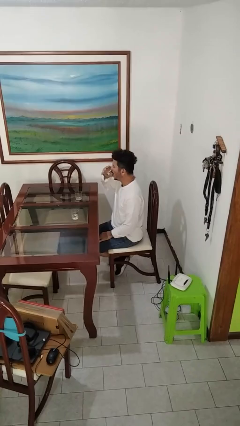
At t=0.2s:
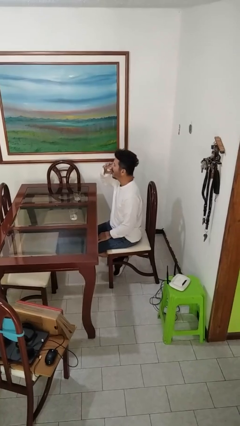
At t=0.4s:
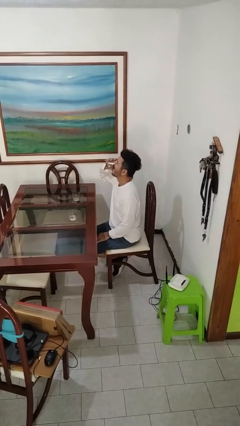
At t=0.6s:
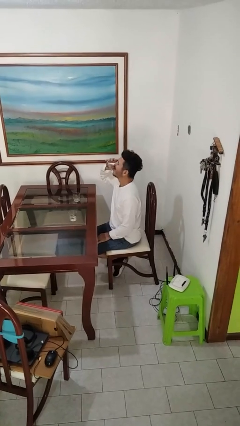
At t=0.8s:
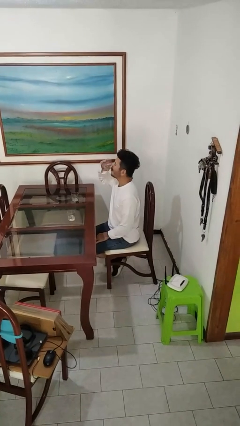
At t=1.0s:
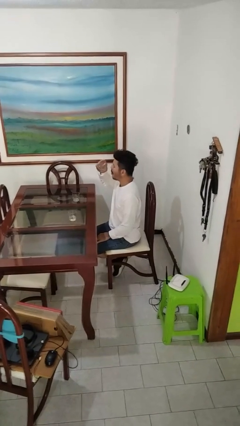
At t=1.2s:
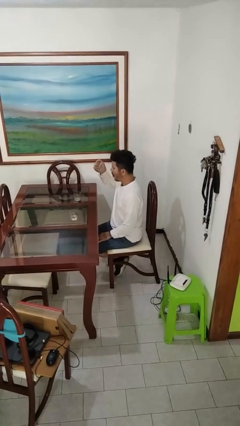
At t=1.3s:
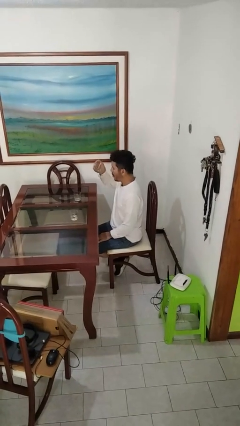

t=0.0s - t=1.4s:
person drinks from shotglass

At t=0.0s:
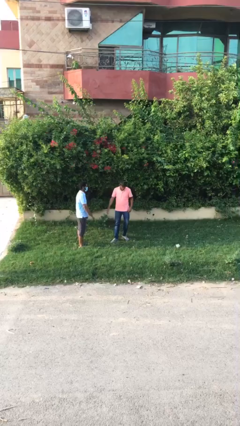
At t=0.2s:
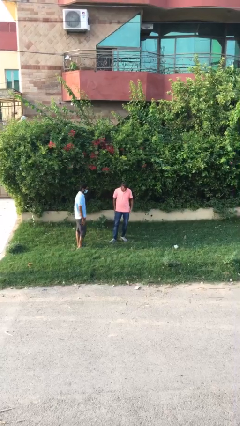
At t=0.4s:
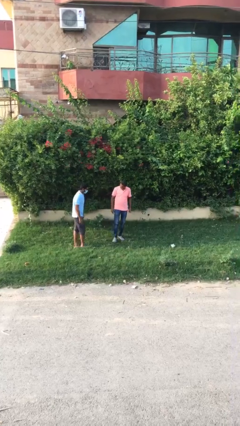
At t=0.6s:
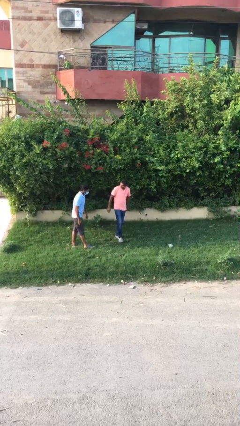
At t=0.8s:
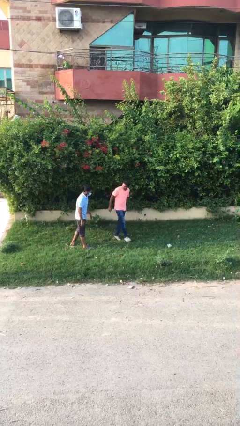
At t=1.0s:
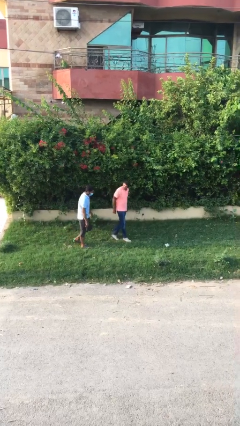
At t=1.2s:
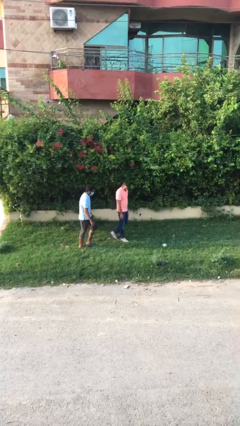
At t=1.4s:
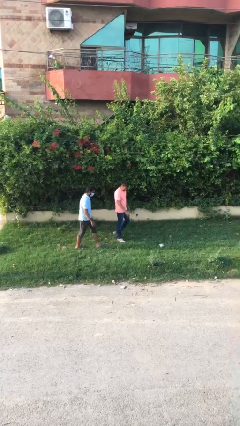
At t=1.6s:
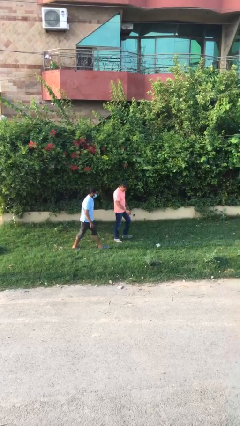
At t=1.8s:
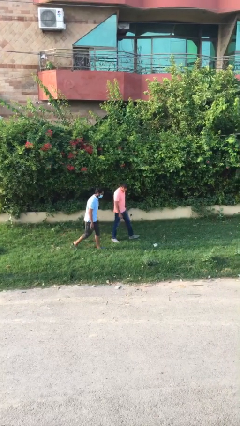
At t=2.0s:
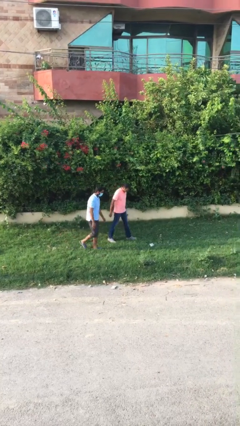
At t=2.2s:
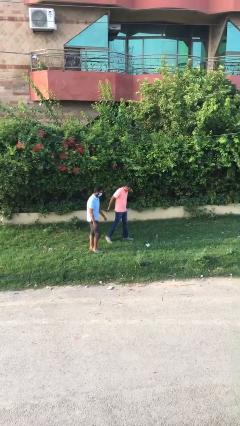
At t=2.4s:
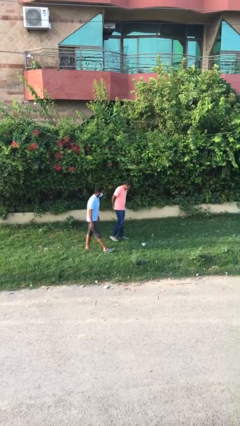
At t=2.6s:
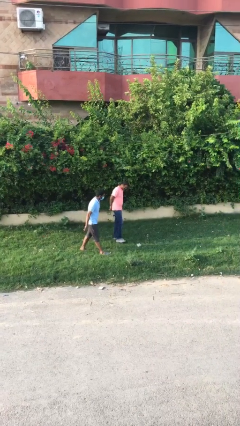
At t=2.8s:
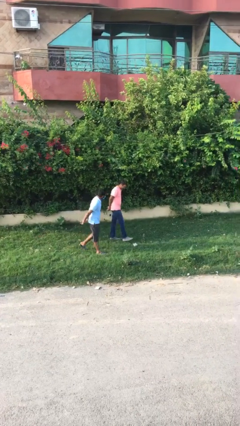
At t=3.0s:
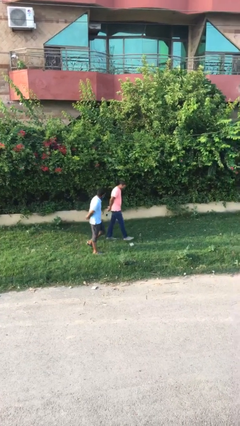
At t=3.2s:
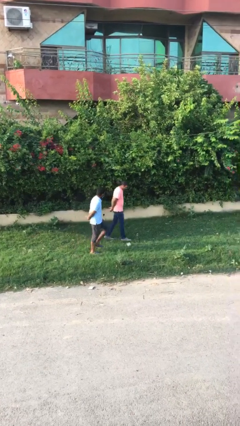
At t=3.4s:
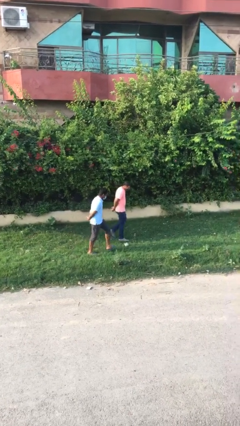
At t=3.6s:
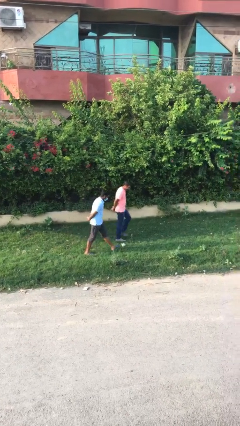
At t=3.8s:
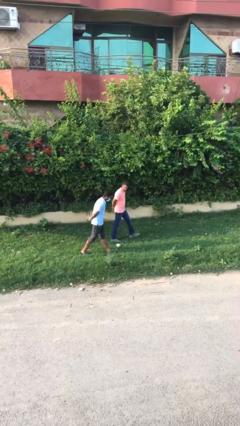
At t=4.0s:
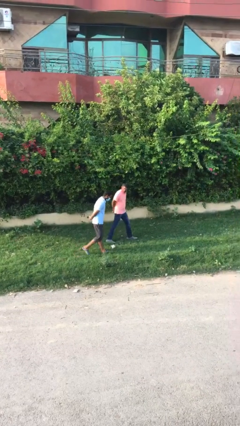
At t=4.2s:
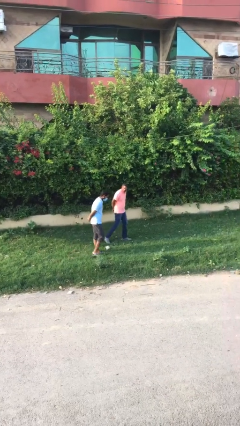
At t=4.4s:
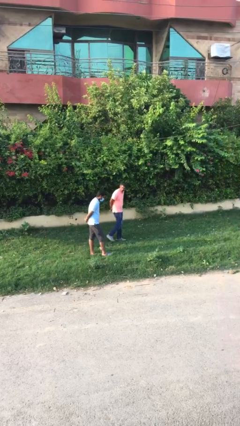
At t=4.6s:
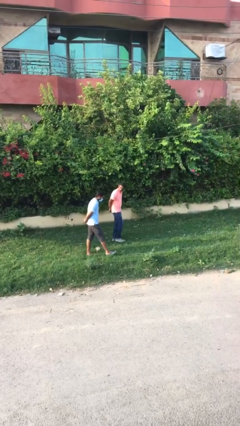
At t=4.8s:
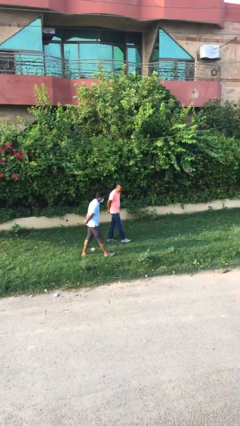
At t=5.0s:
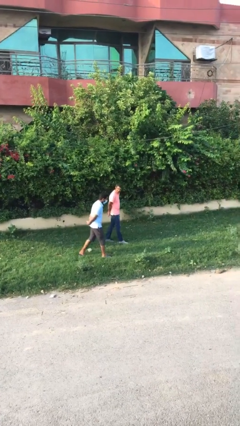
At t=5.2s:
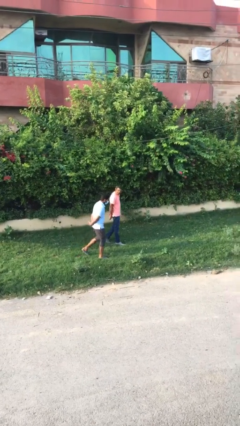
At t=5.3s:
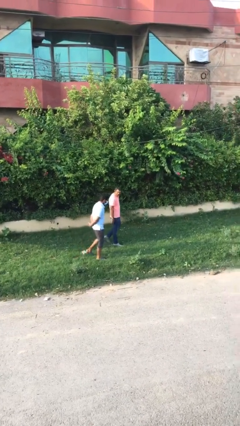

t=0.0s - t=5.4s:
person talks to person

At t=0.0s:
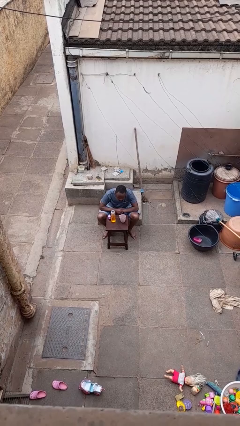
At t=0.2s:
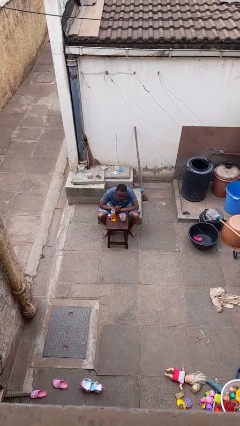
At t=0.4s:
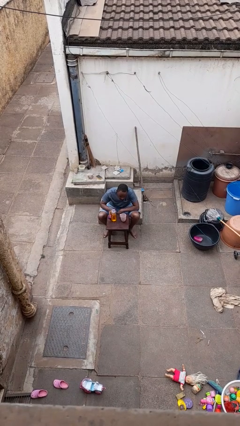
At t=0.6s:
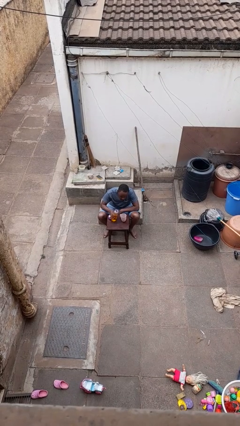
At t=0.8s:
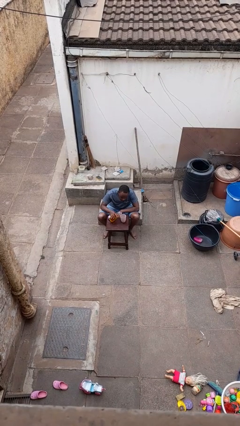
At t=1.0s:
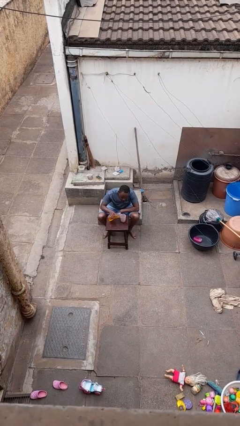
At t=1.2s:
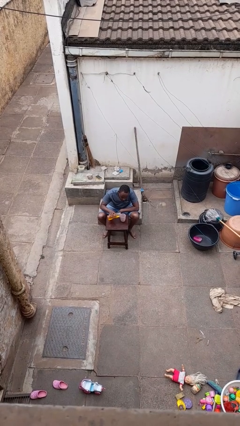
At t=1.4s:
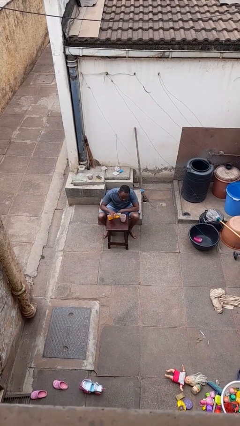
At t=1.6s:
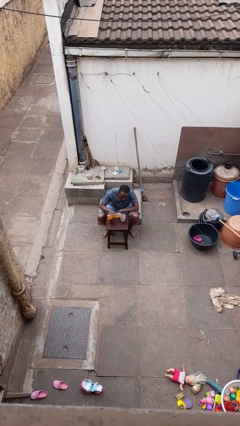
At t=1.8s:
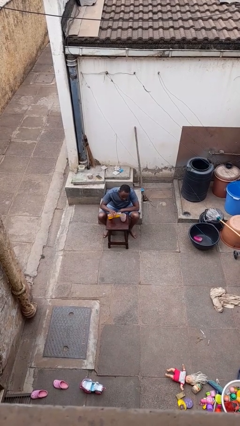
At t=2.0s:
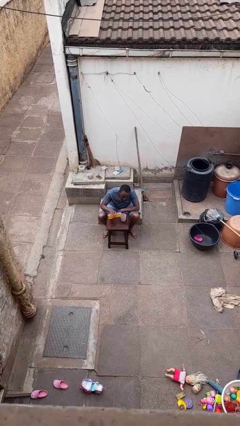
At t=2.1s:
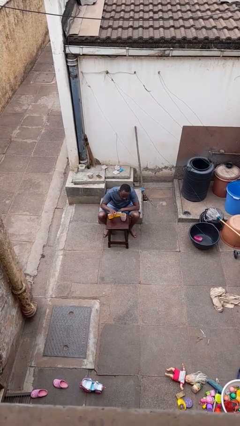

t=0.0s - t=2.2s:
person pours liquid into cup

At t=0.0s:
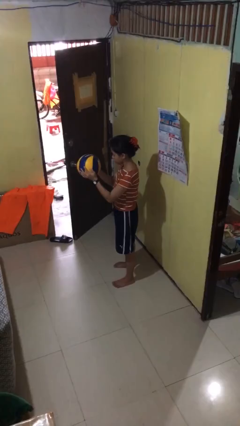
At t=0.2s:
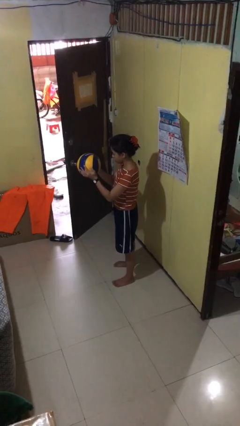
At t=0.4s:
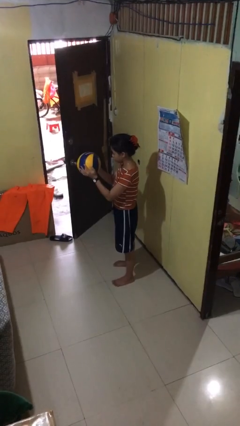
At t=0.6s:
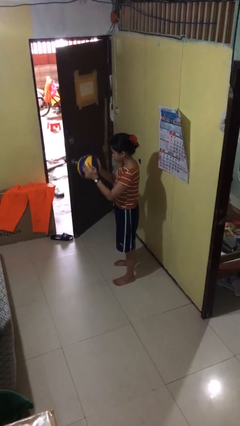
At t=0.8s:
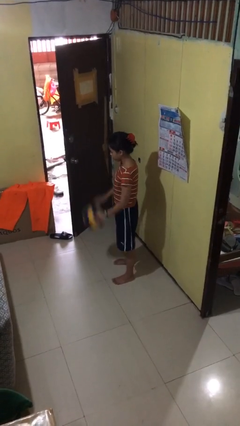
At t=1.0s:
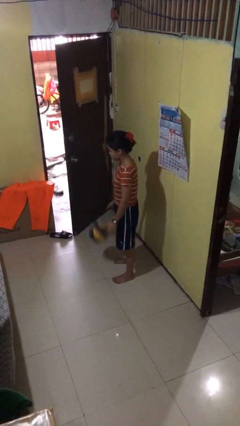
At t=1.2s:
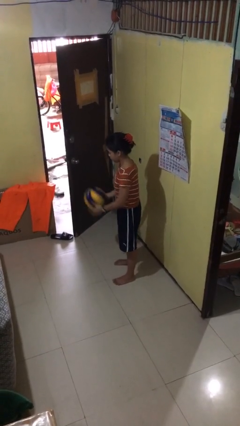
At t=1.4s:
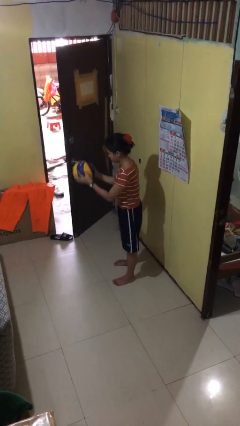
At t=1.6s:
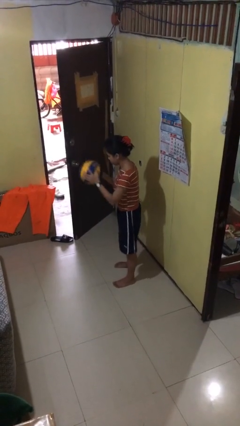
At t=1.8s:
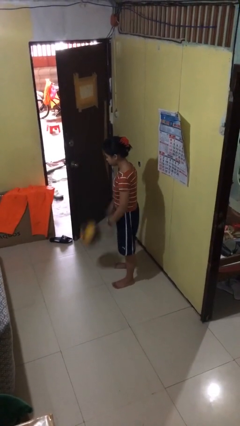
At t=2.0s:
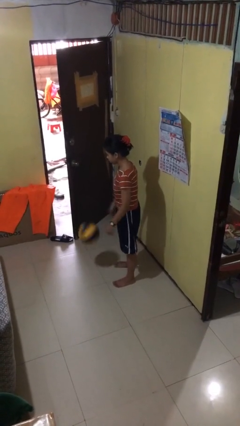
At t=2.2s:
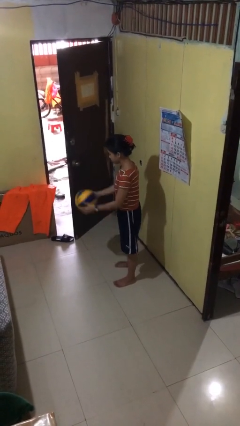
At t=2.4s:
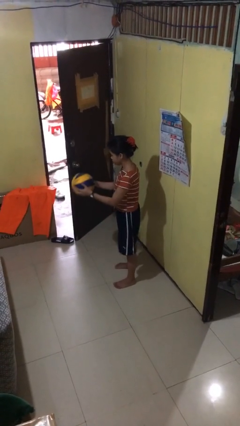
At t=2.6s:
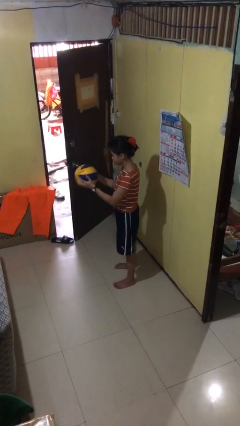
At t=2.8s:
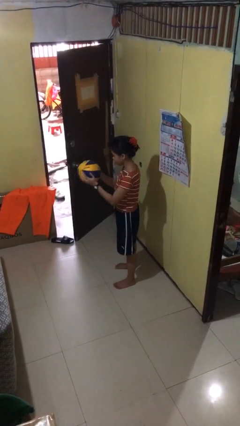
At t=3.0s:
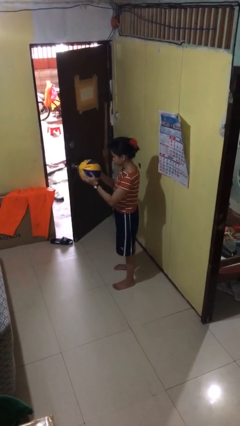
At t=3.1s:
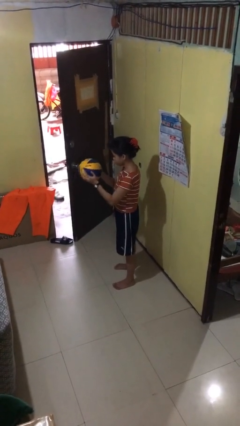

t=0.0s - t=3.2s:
person bounces ball on floor

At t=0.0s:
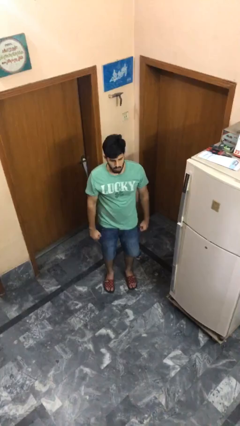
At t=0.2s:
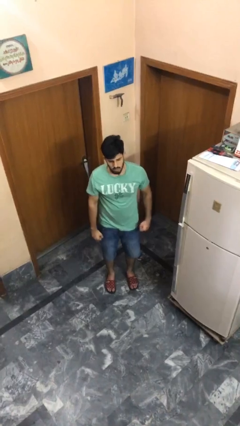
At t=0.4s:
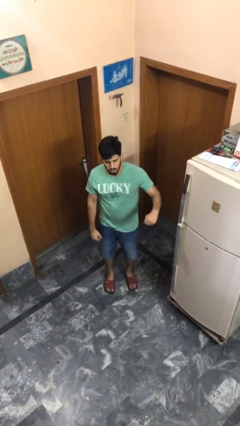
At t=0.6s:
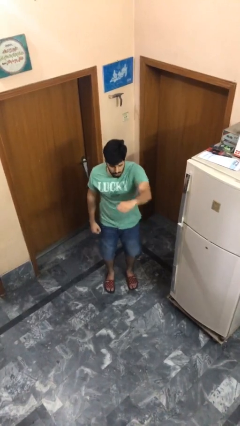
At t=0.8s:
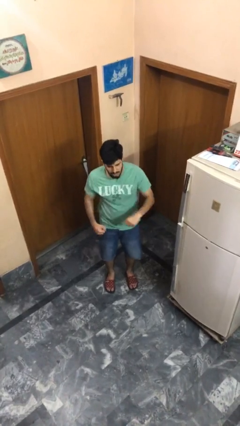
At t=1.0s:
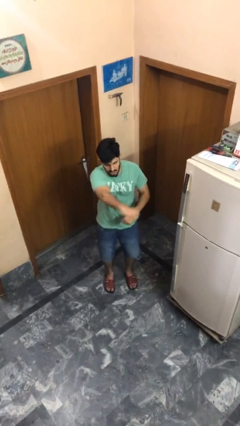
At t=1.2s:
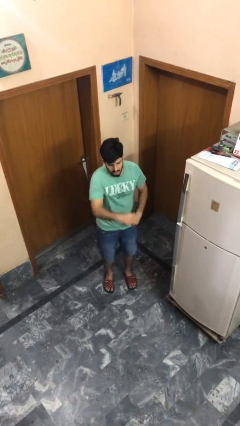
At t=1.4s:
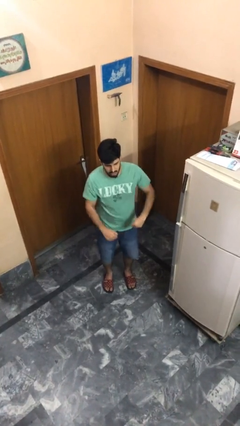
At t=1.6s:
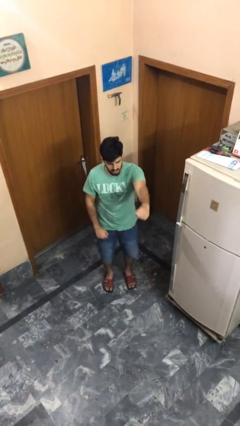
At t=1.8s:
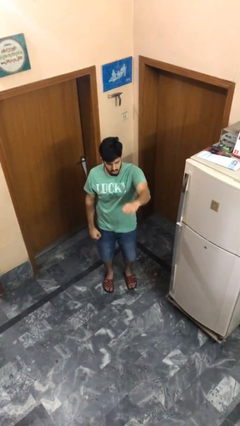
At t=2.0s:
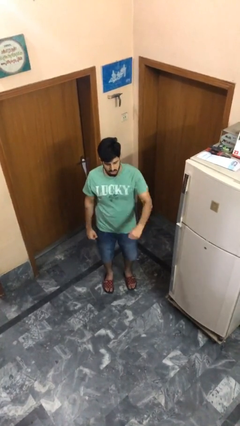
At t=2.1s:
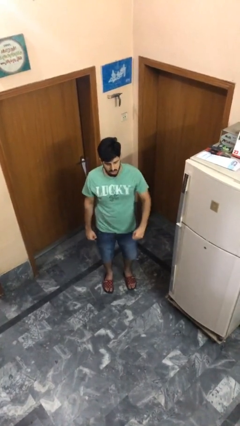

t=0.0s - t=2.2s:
person punches

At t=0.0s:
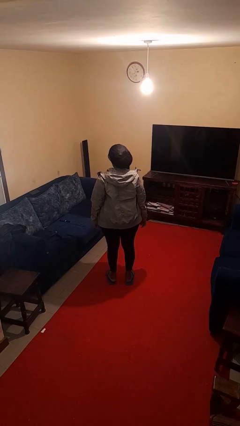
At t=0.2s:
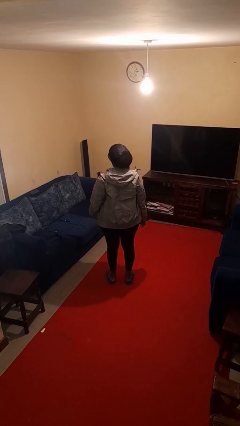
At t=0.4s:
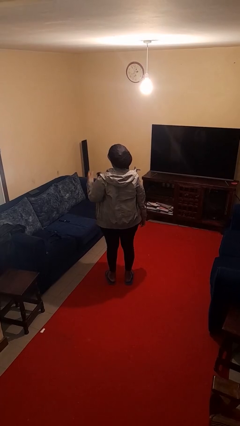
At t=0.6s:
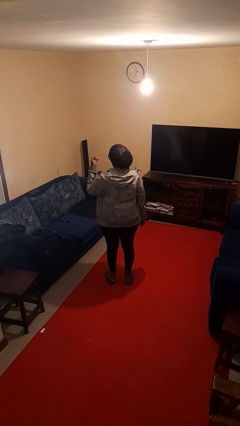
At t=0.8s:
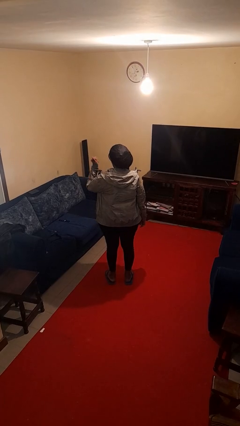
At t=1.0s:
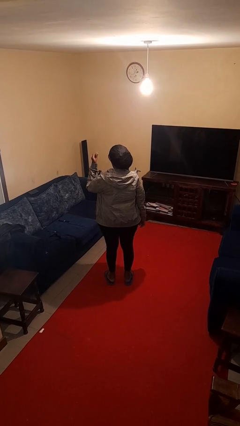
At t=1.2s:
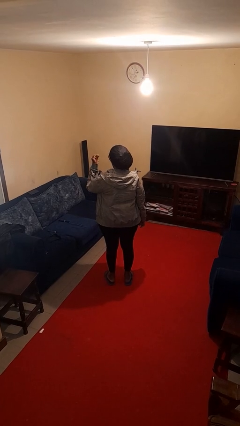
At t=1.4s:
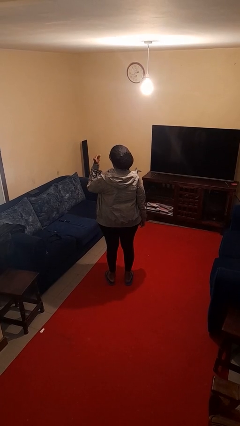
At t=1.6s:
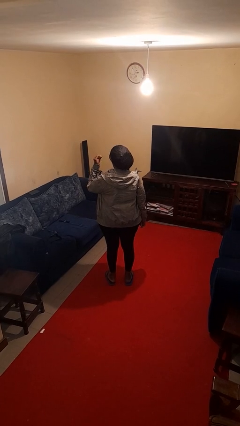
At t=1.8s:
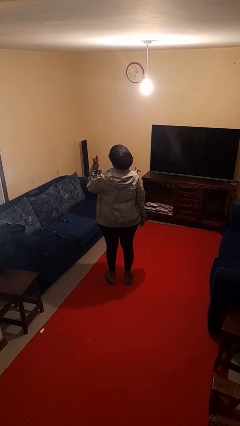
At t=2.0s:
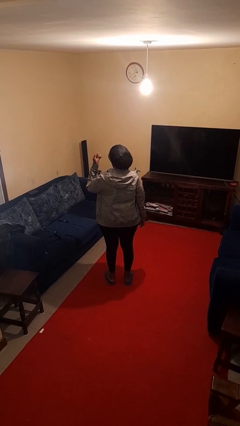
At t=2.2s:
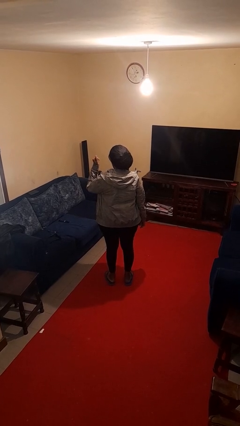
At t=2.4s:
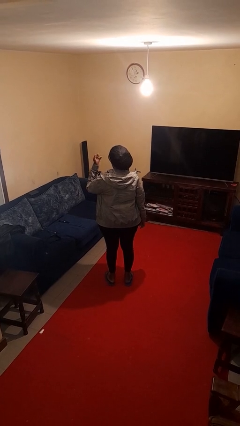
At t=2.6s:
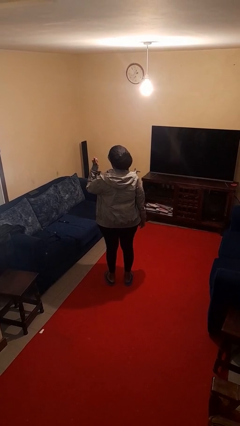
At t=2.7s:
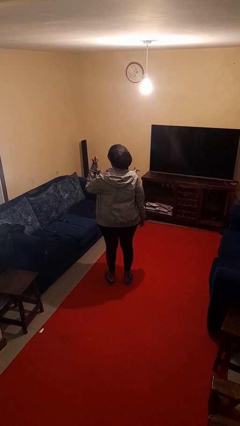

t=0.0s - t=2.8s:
person snaps fingers
